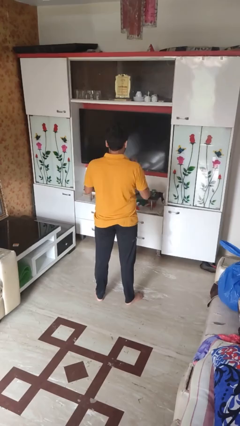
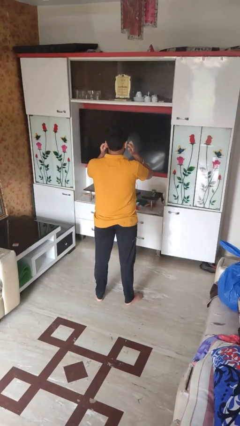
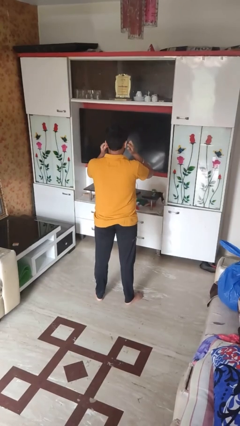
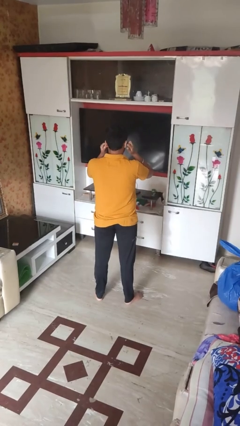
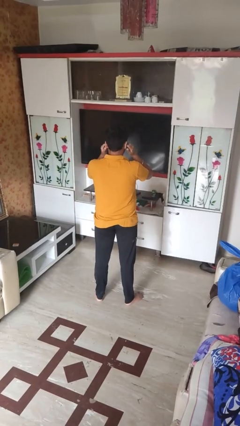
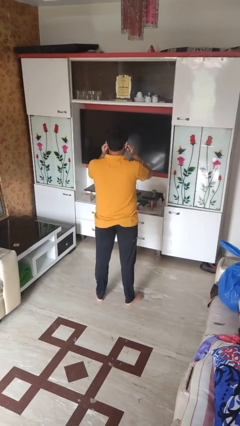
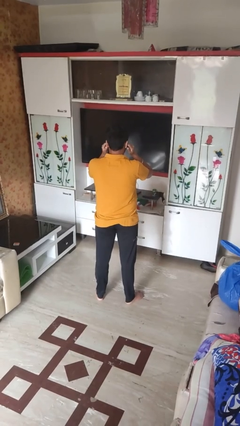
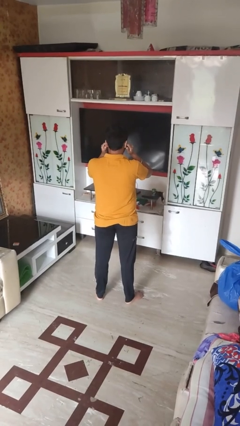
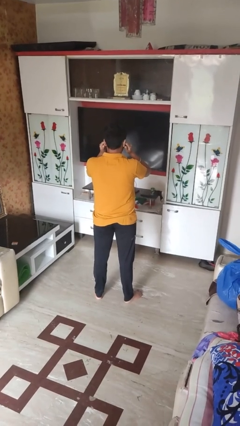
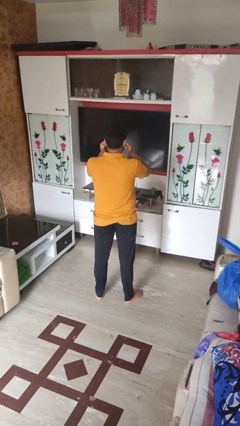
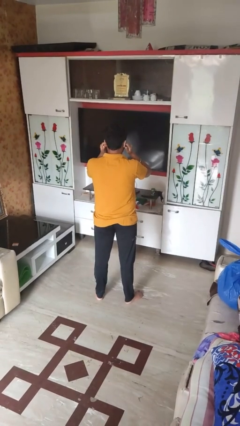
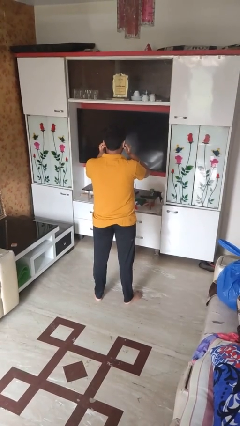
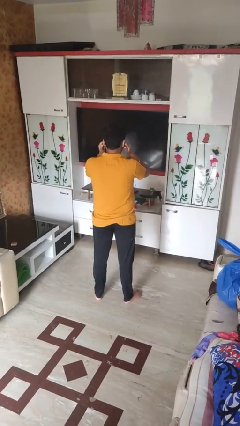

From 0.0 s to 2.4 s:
person puts fingers in ear

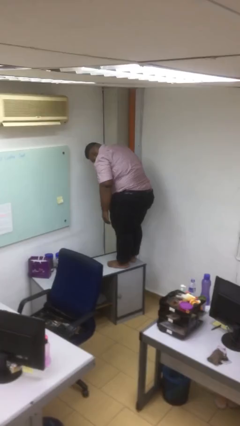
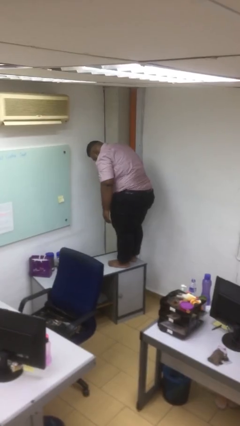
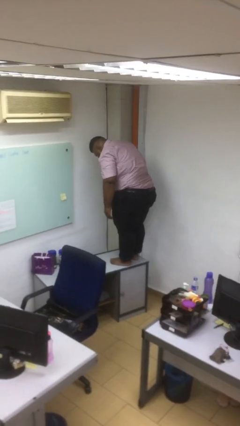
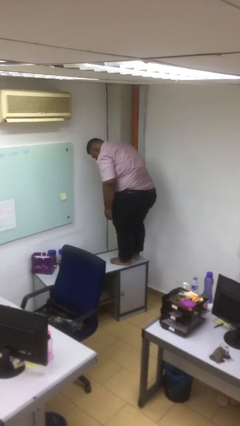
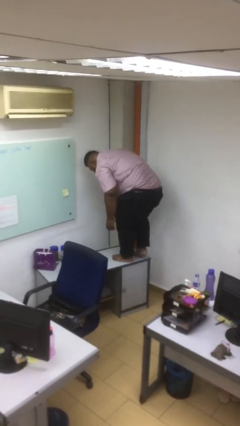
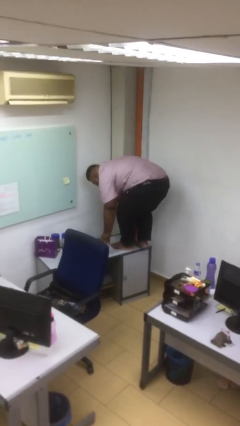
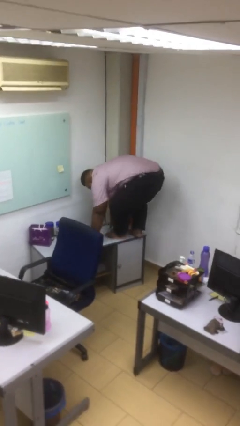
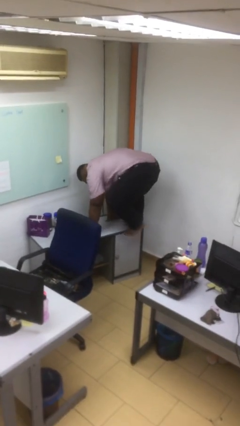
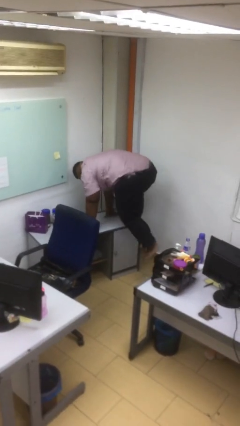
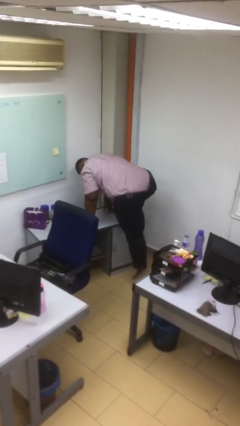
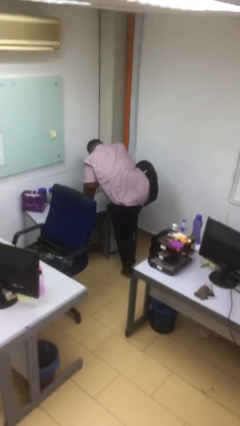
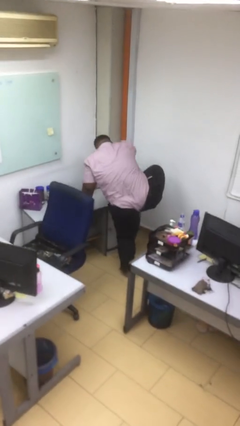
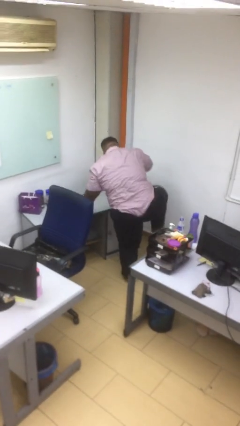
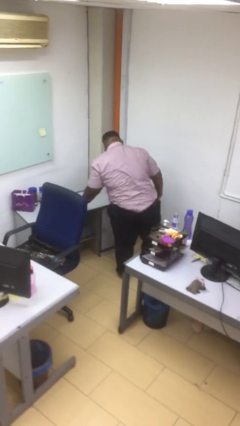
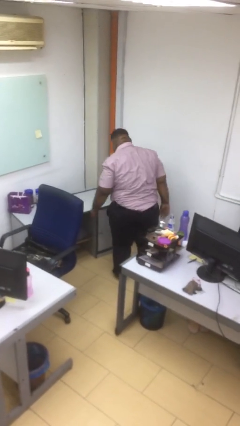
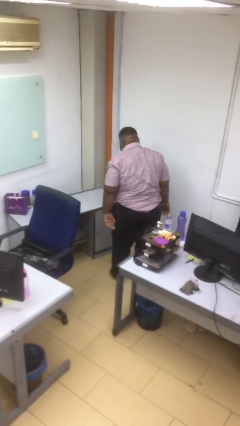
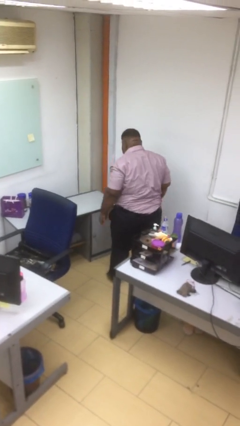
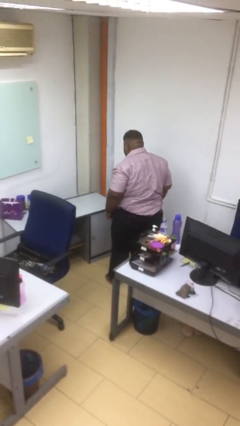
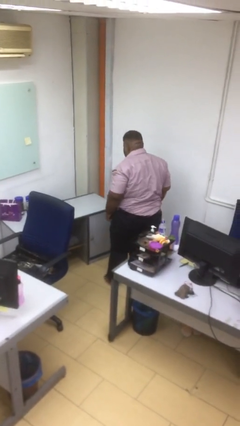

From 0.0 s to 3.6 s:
person climbs off table

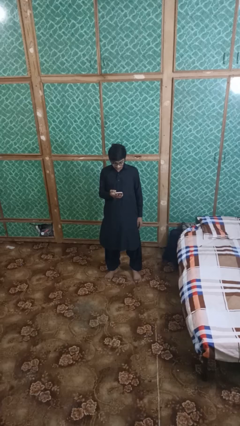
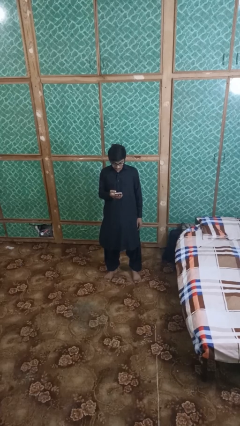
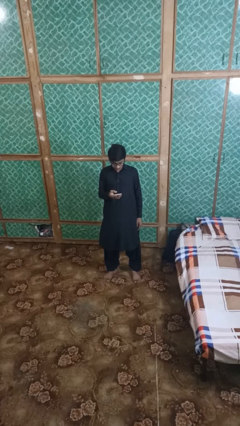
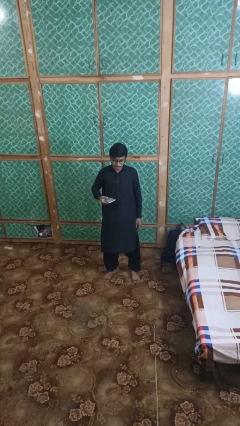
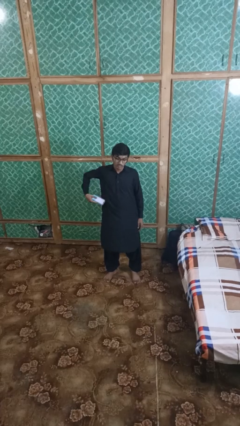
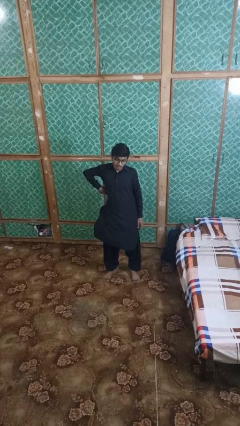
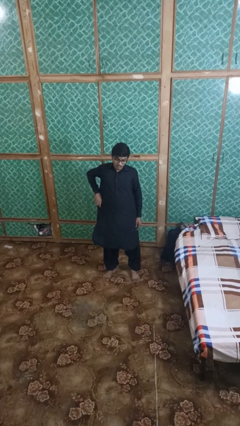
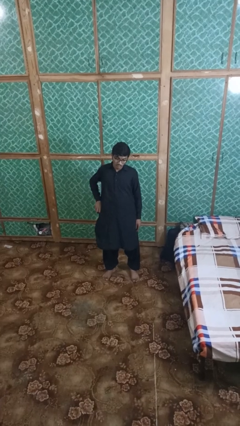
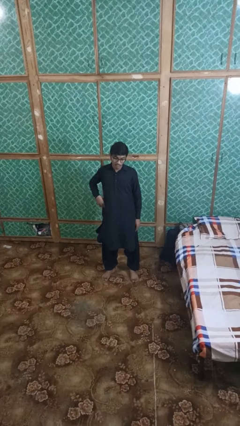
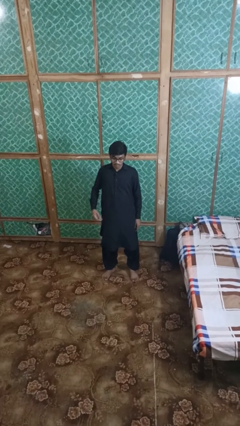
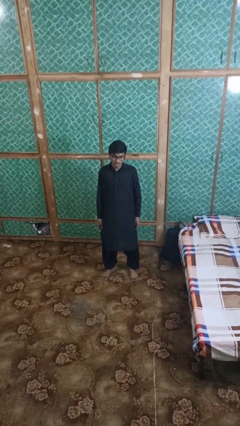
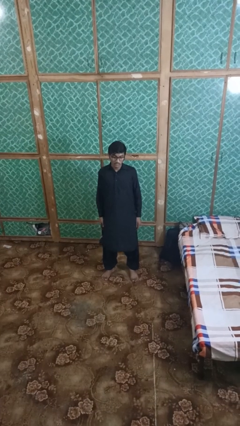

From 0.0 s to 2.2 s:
person puts phone into pocket

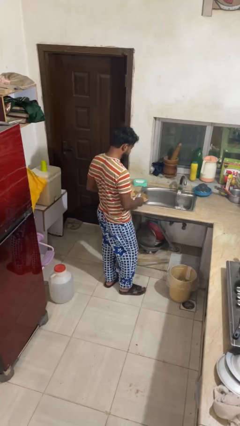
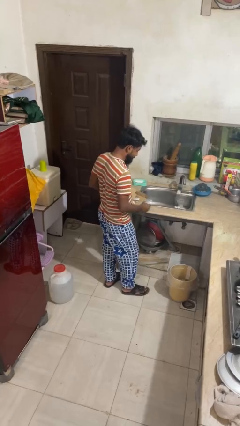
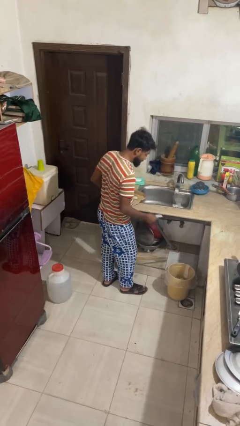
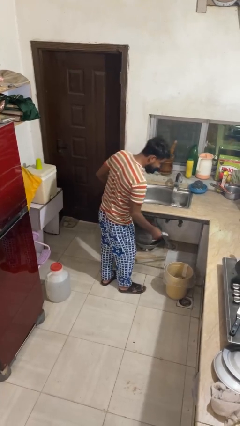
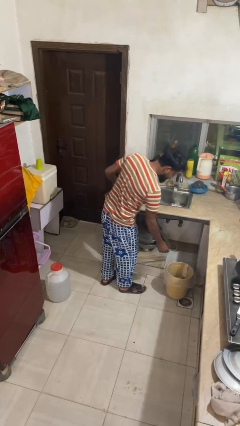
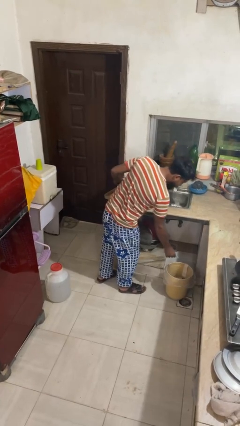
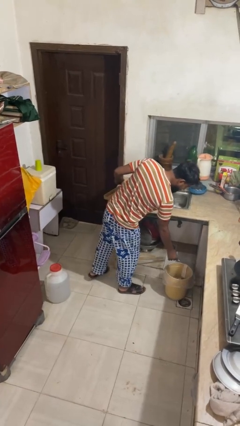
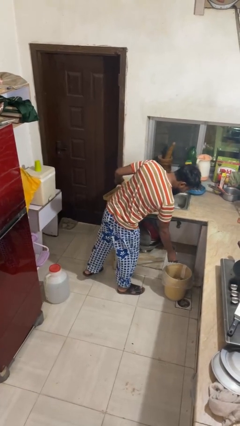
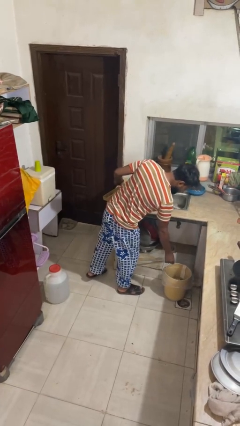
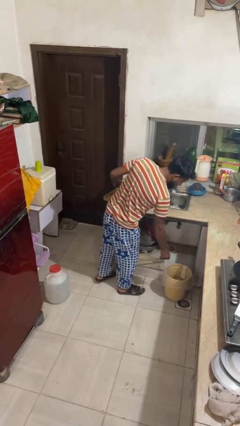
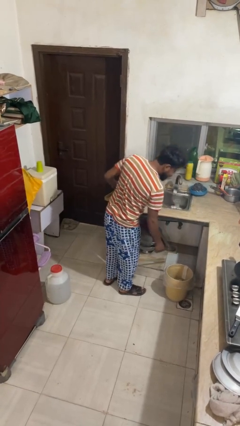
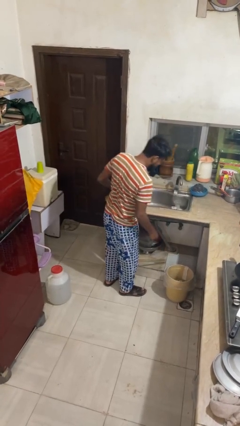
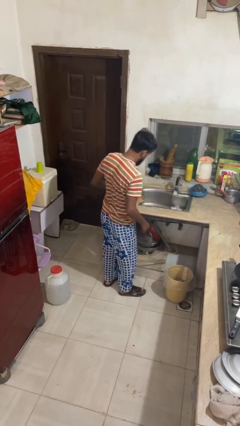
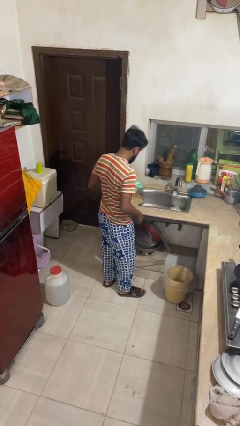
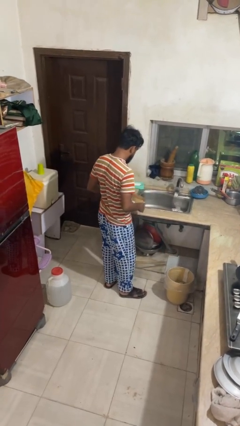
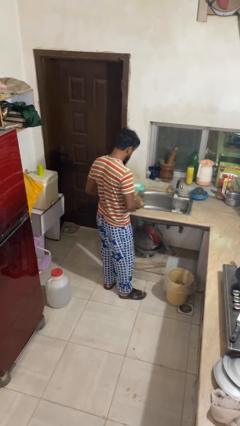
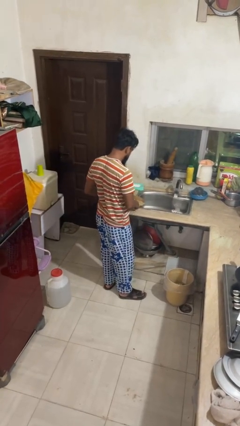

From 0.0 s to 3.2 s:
person discards trash

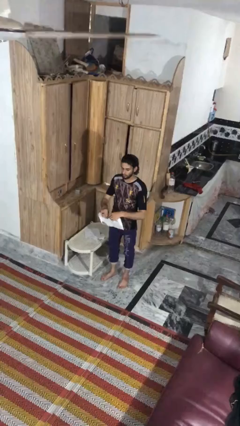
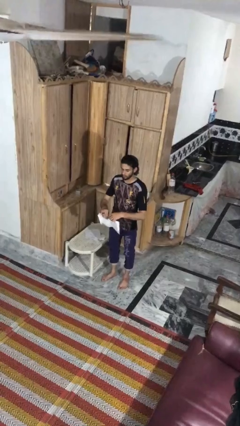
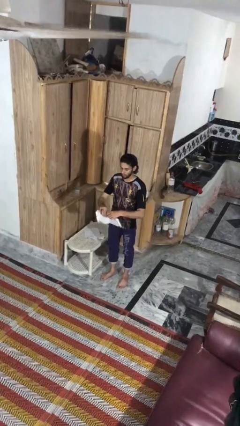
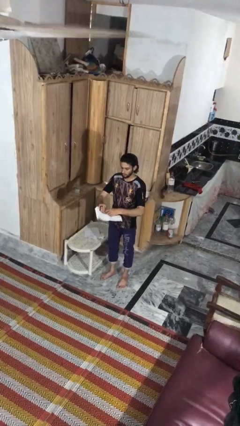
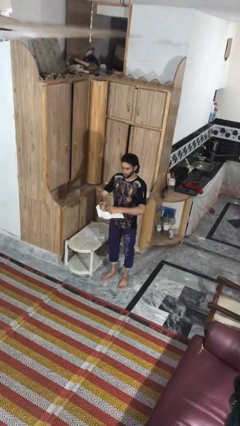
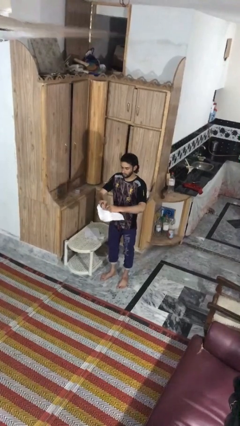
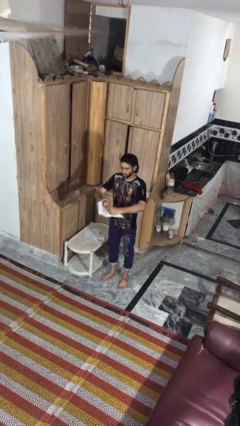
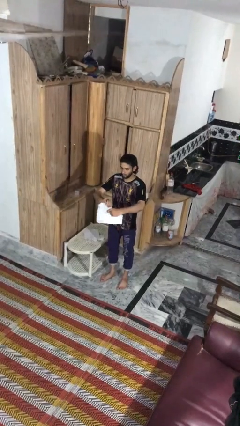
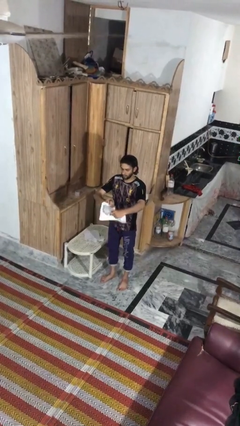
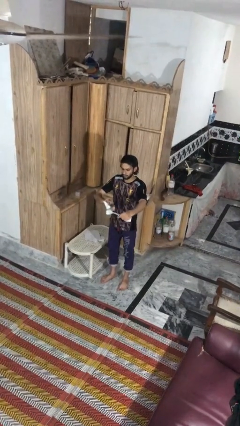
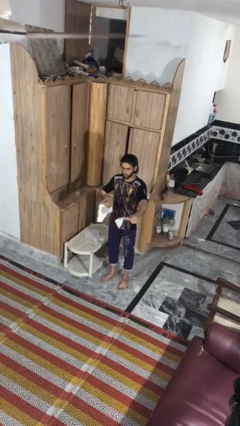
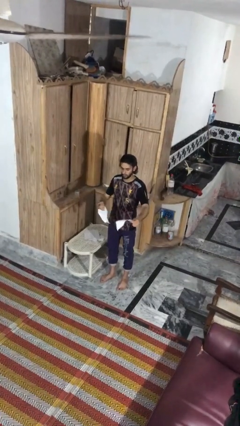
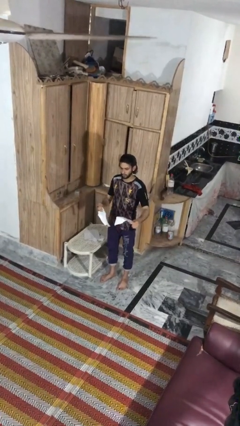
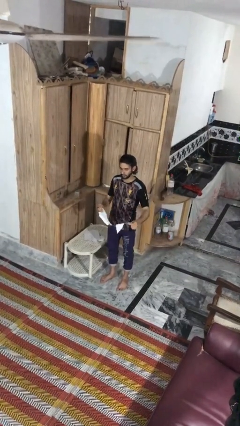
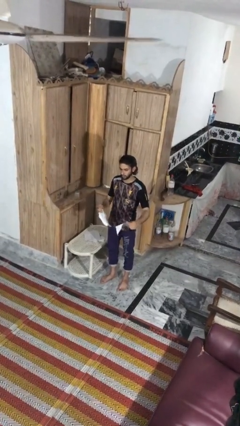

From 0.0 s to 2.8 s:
person tears paper

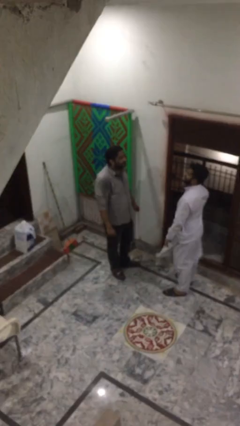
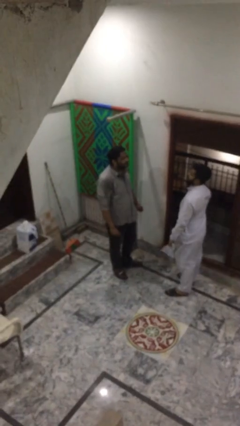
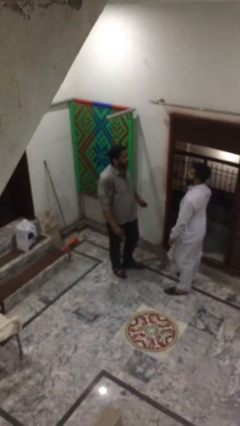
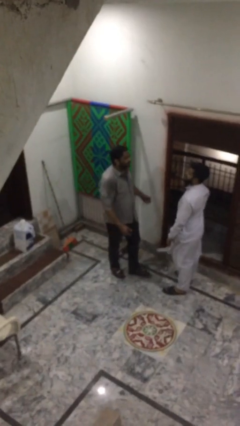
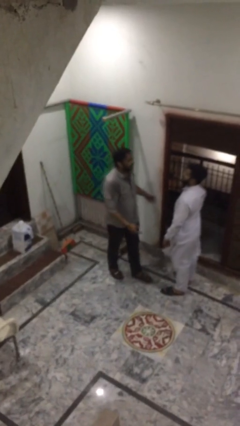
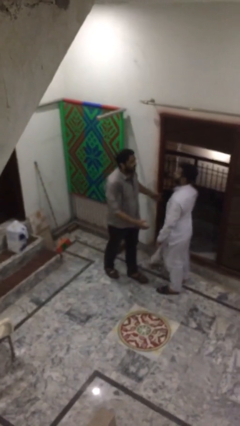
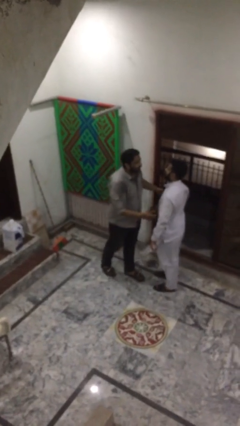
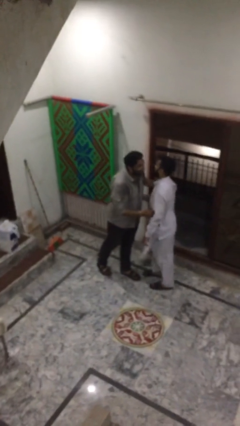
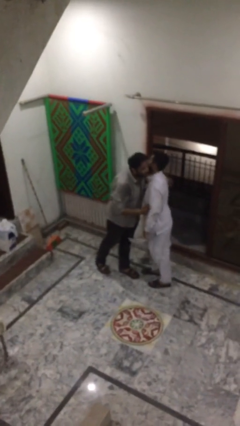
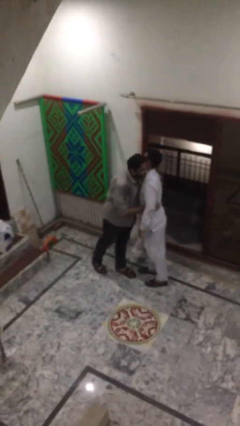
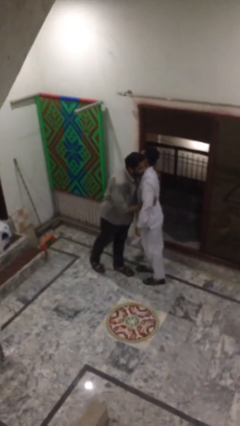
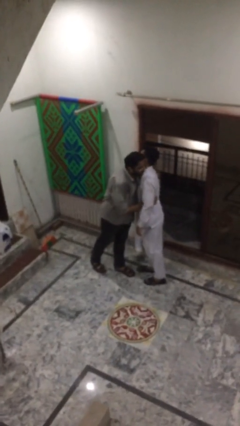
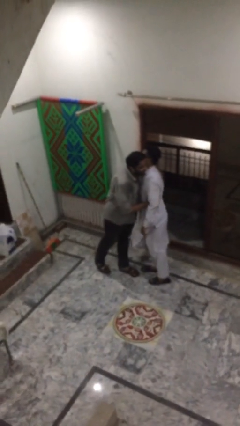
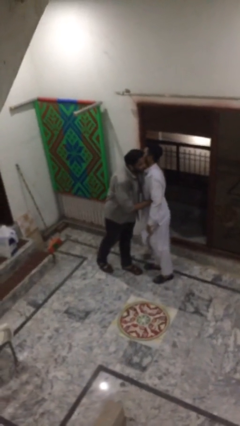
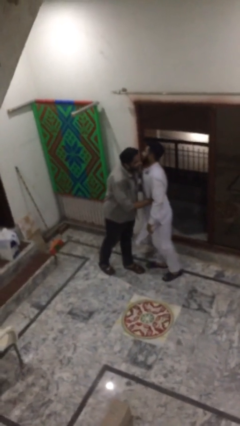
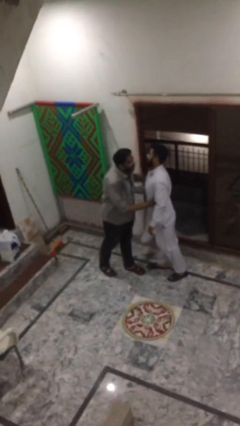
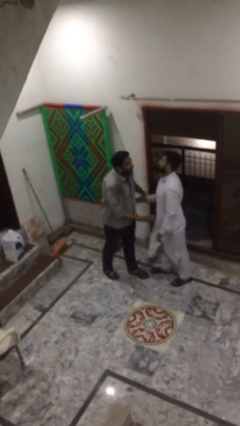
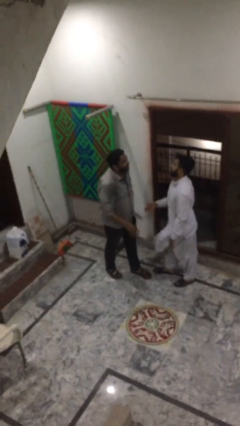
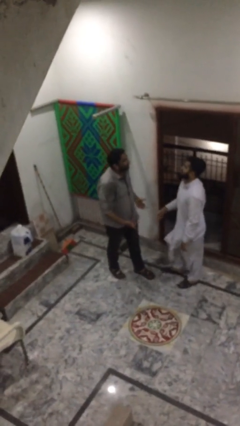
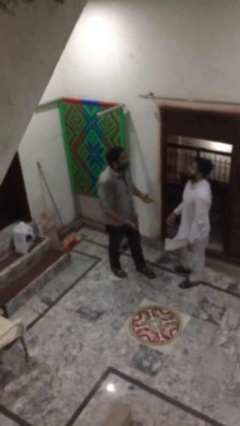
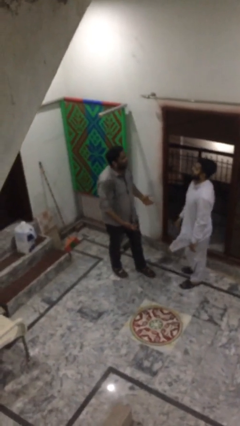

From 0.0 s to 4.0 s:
person embraces person
